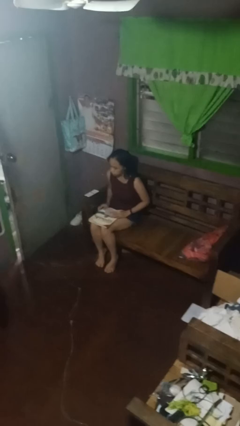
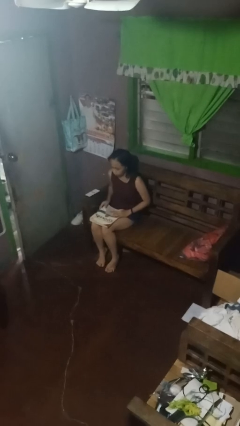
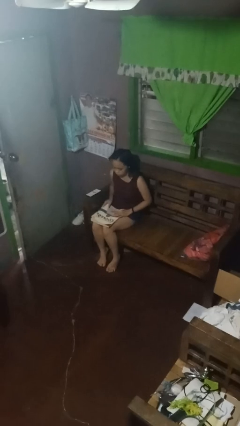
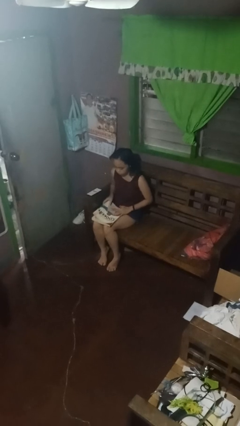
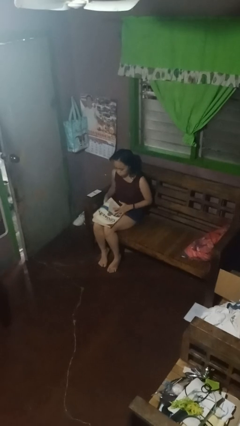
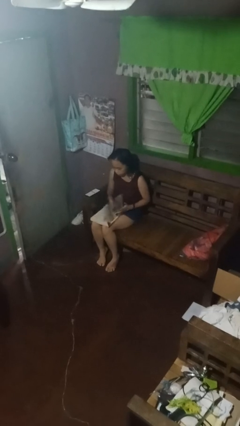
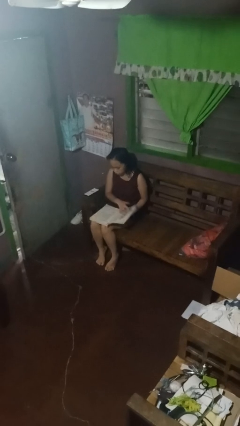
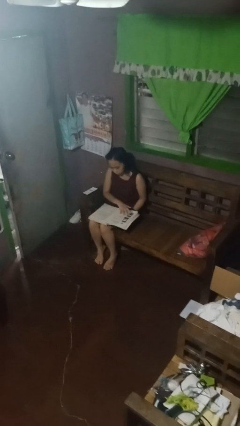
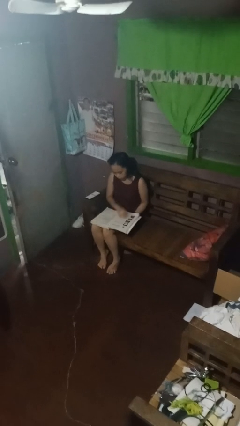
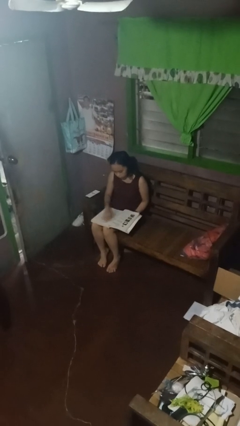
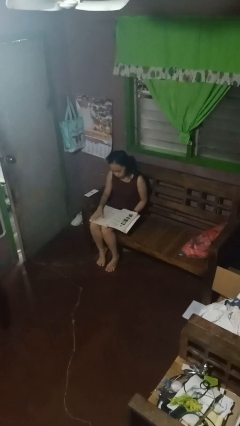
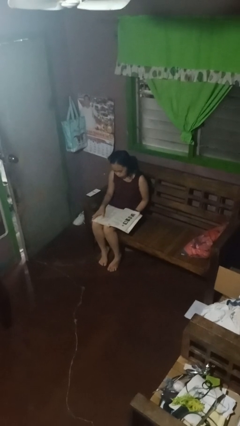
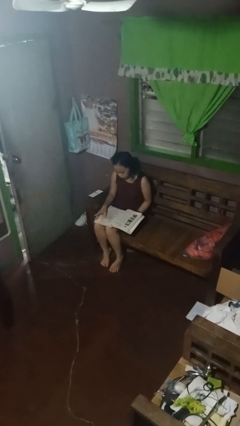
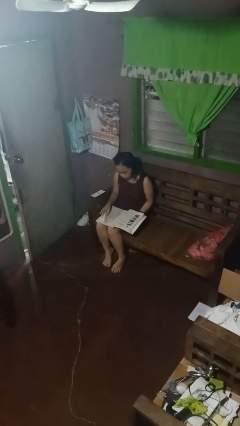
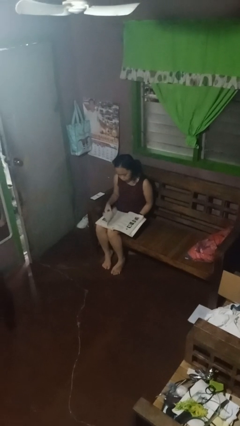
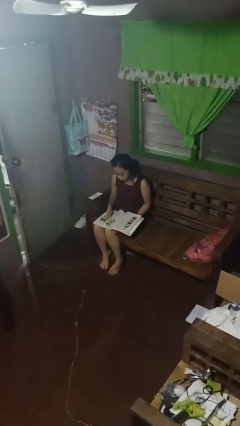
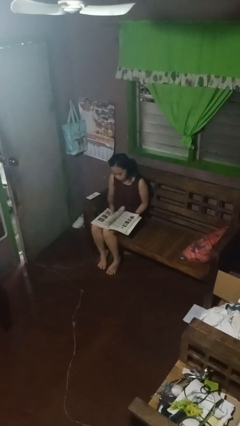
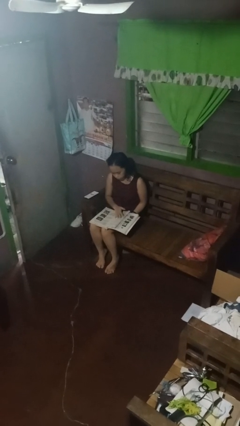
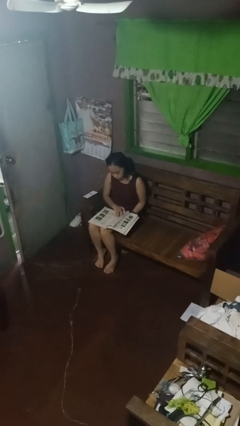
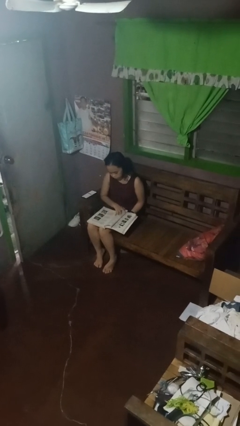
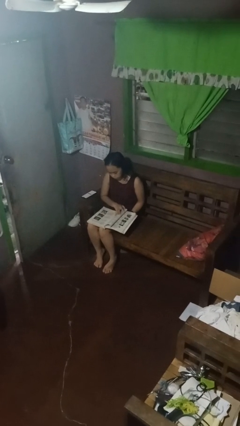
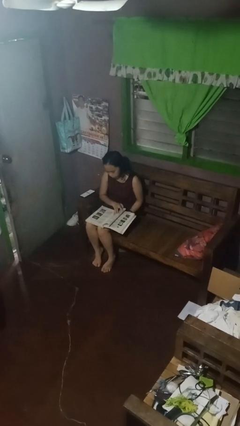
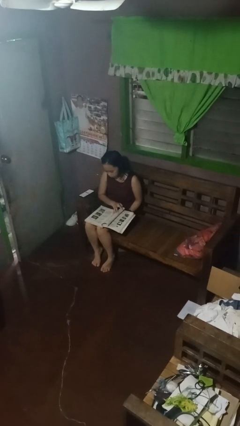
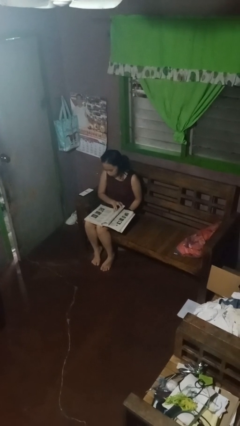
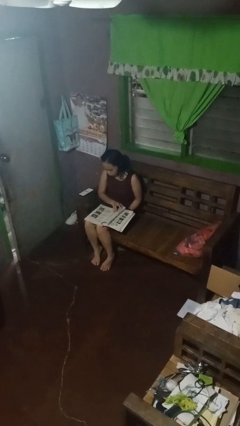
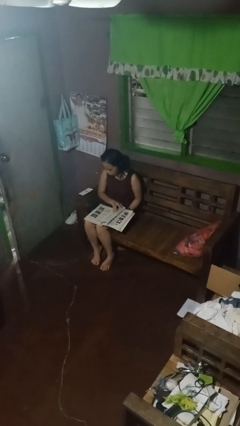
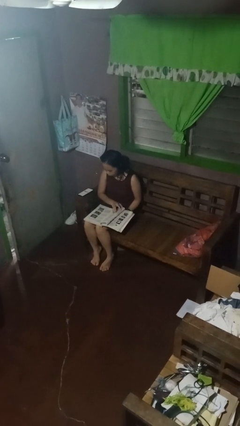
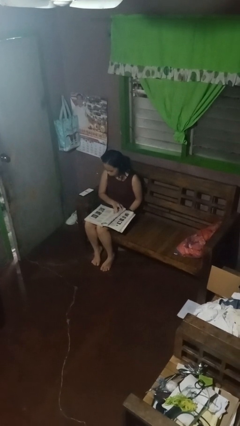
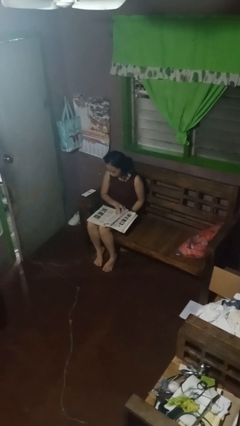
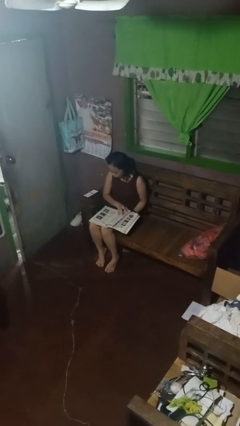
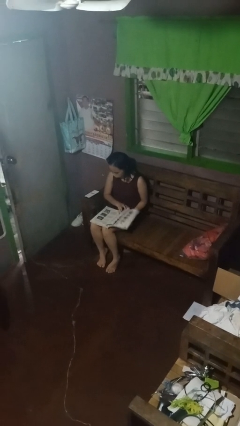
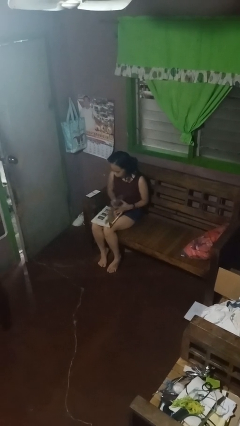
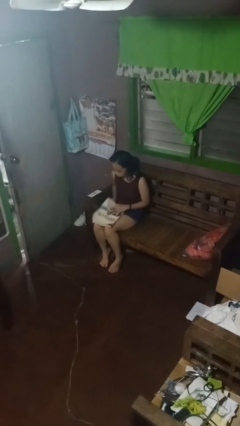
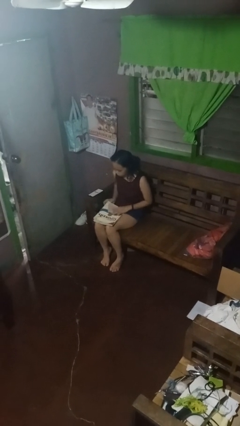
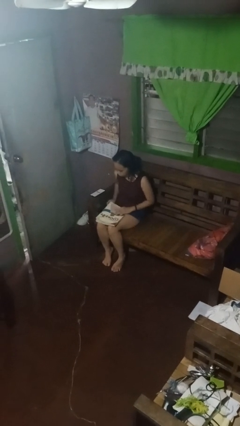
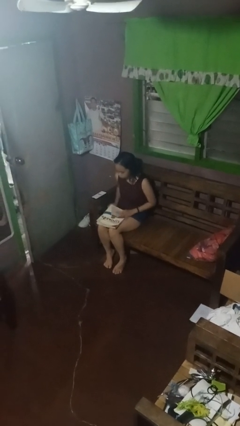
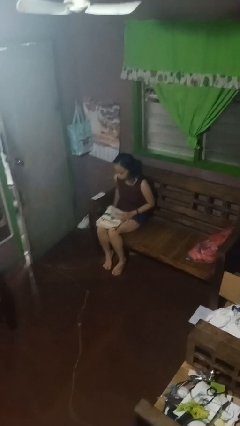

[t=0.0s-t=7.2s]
person reads book

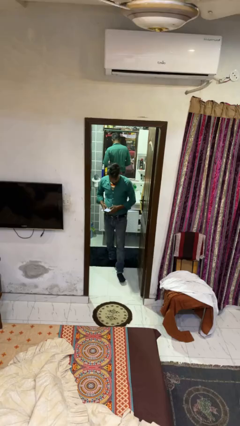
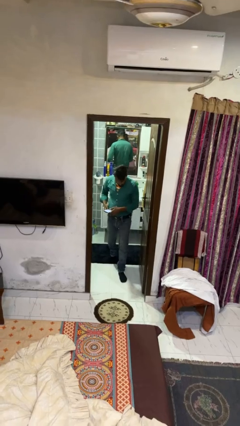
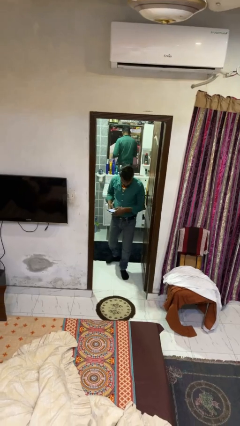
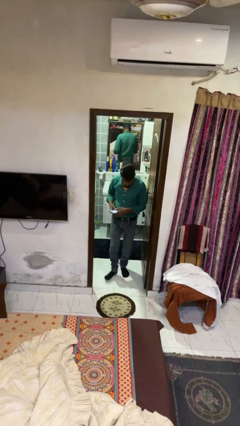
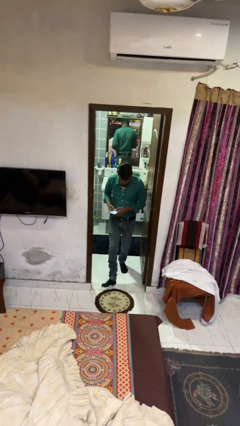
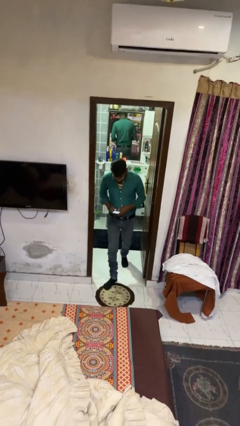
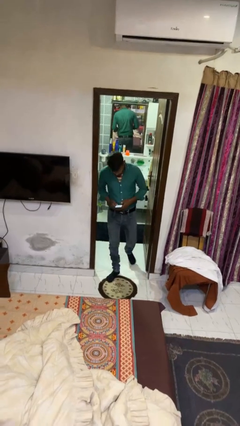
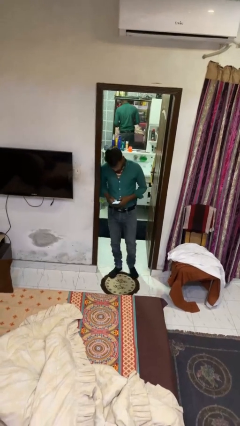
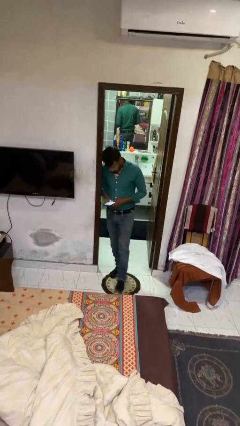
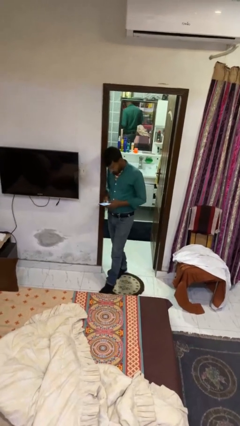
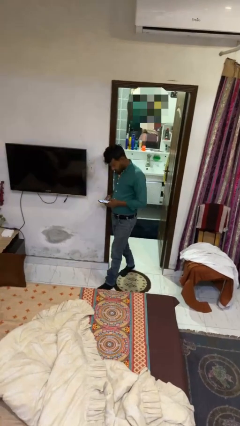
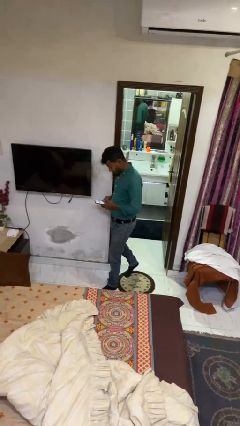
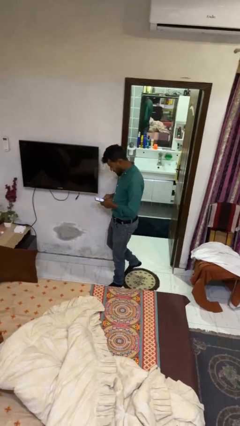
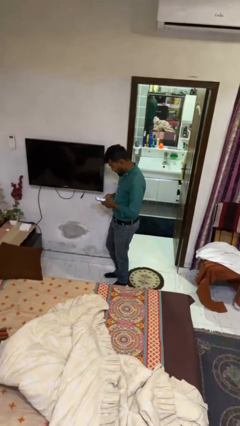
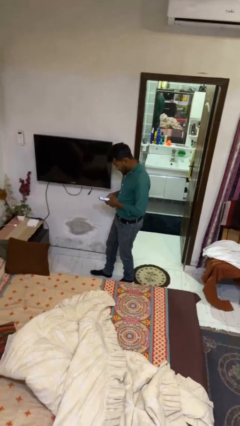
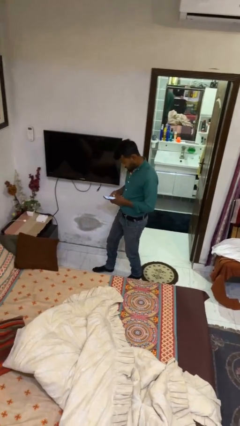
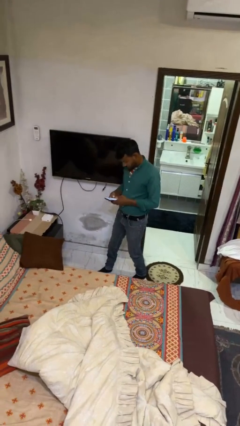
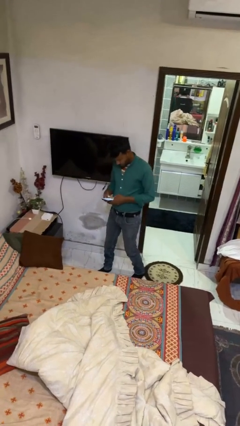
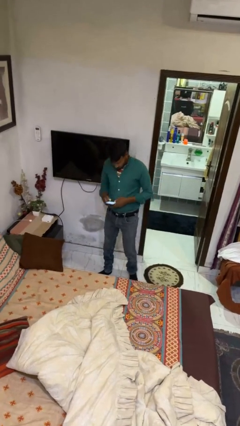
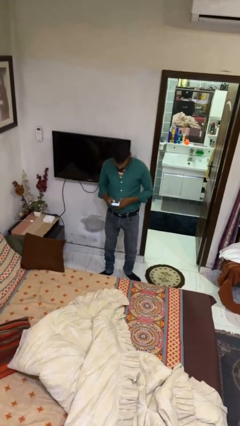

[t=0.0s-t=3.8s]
person enters scene through structure

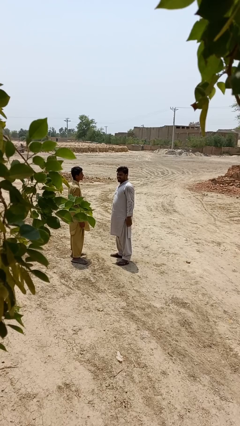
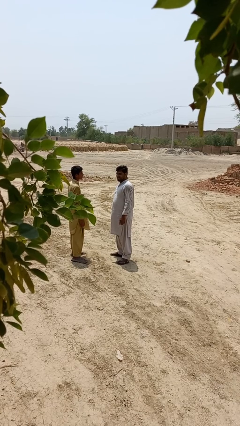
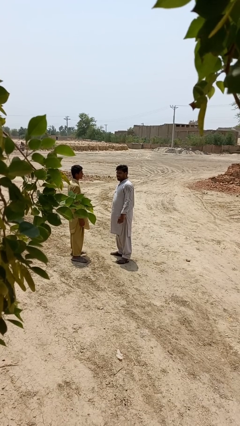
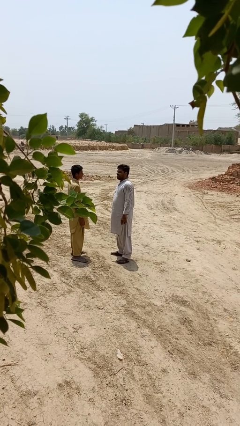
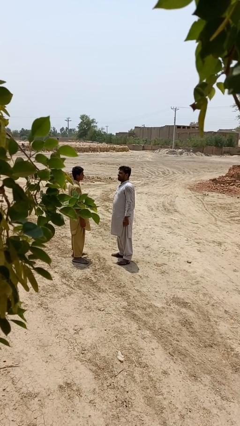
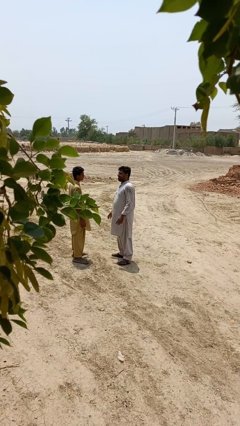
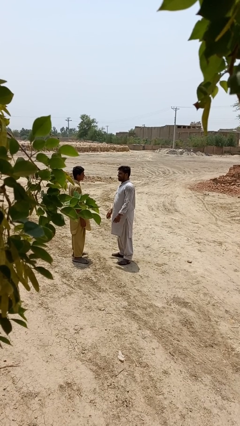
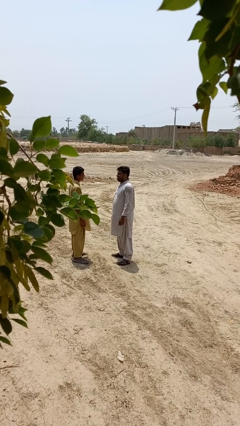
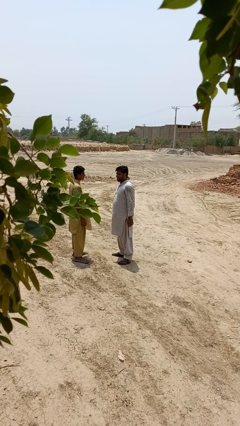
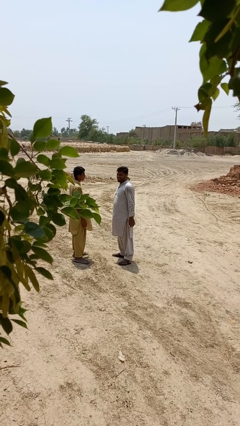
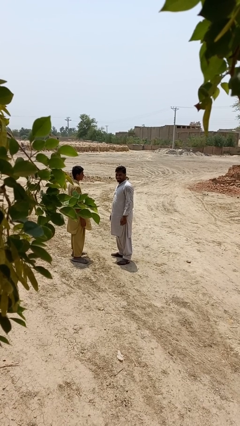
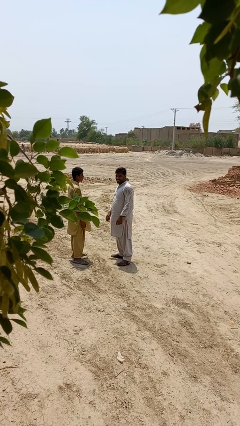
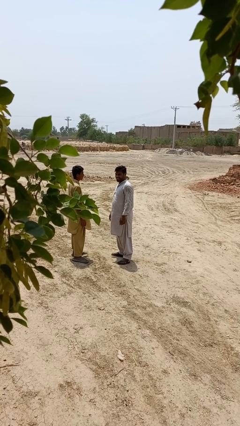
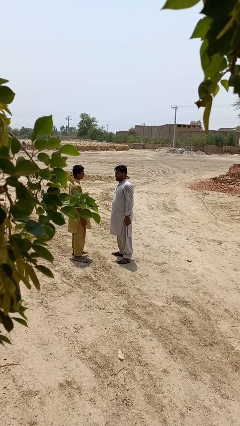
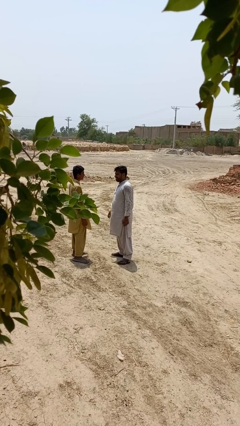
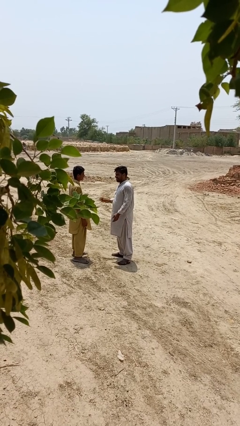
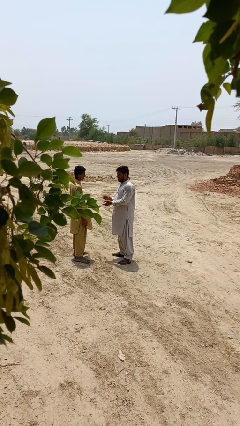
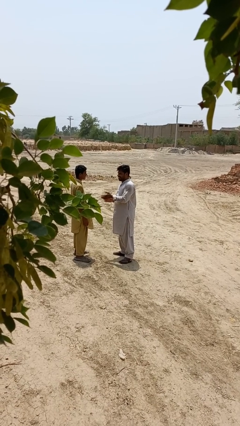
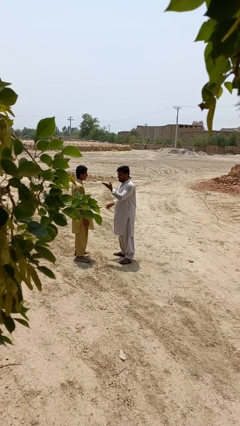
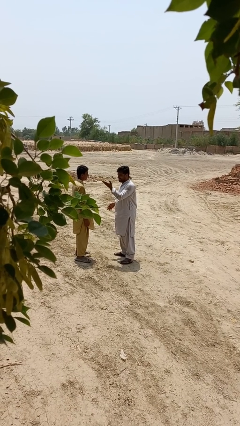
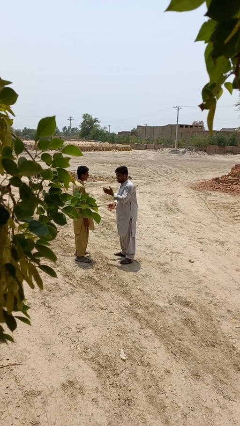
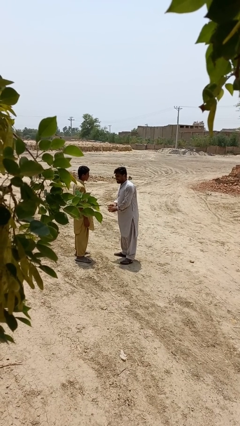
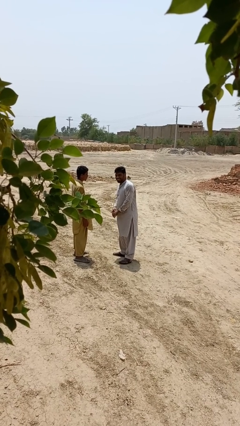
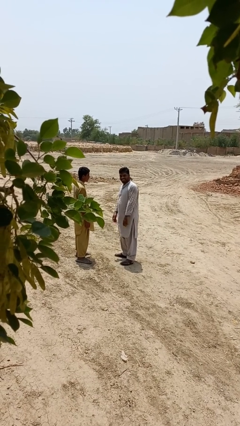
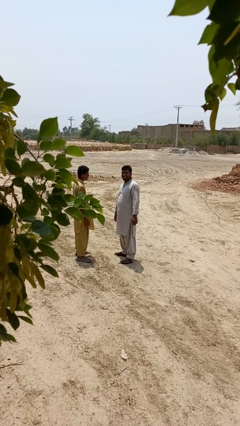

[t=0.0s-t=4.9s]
person laughs with person

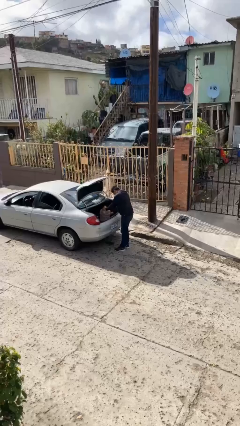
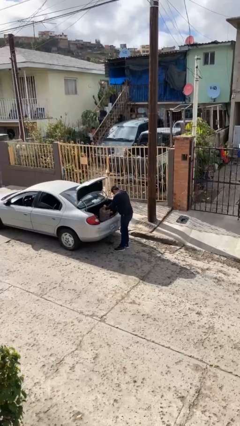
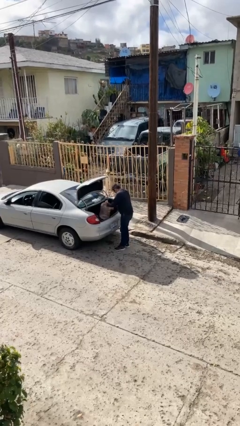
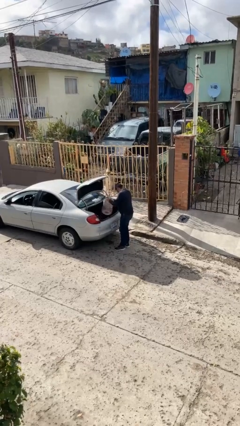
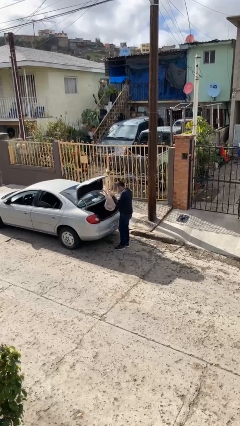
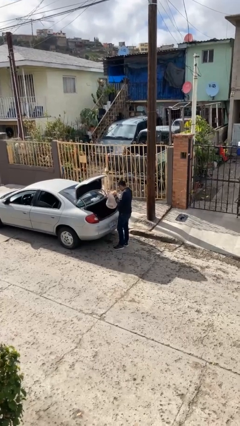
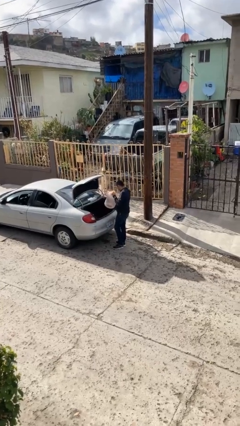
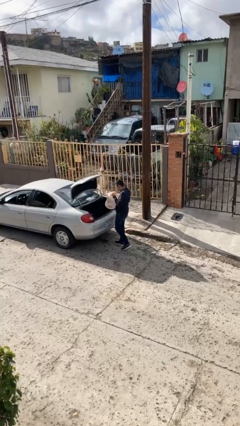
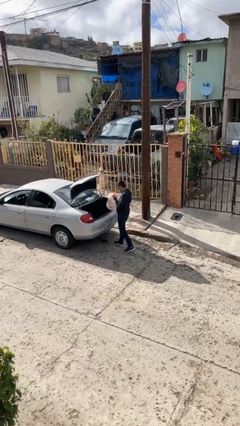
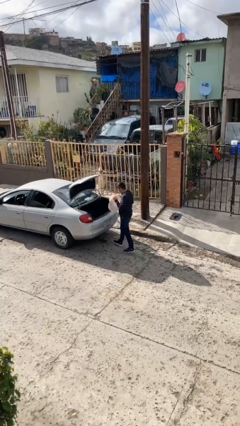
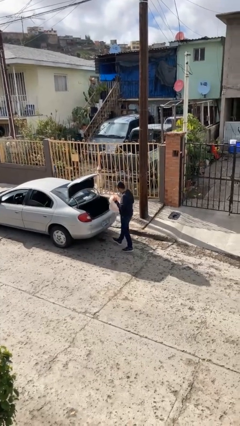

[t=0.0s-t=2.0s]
person unloads car
